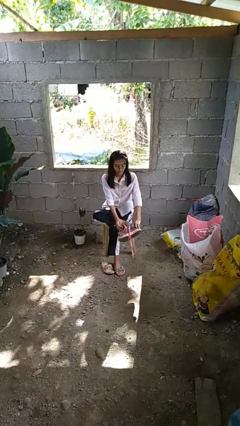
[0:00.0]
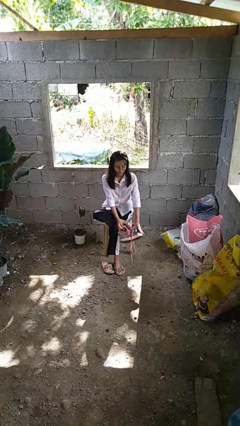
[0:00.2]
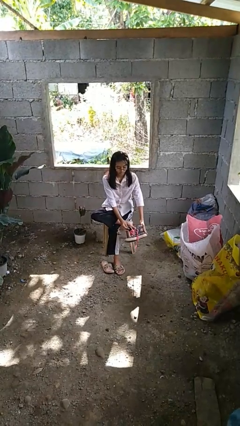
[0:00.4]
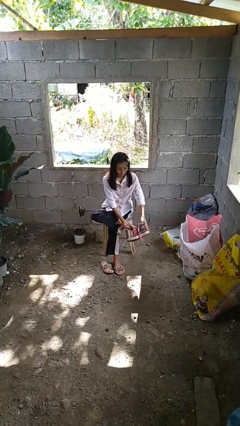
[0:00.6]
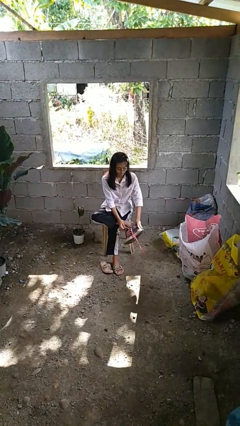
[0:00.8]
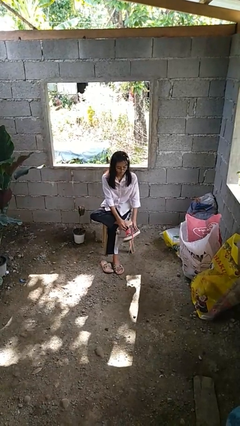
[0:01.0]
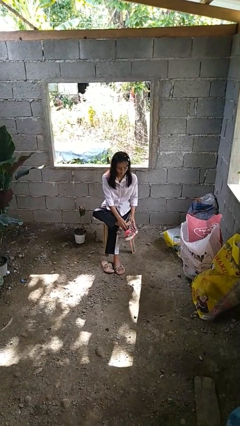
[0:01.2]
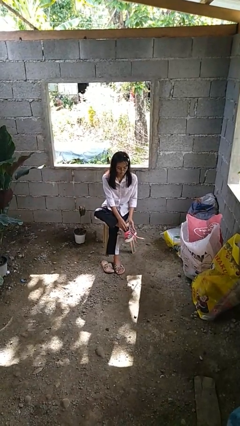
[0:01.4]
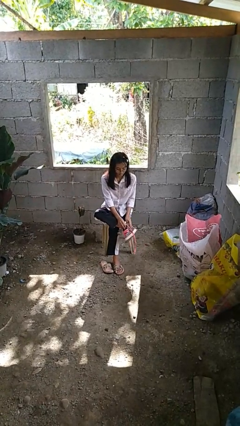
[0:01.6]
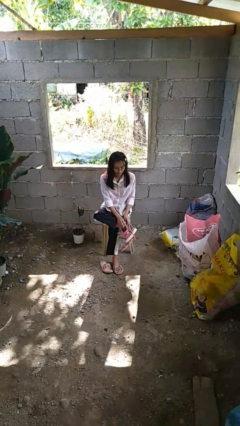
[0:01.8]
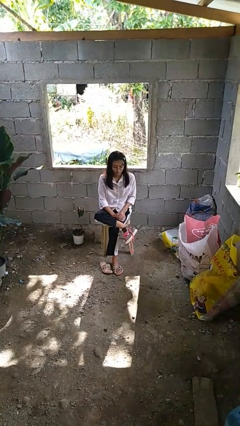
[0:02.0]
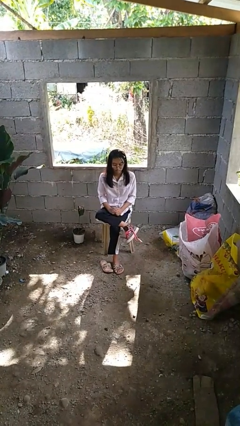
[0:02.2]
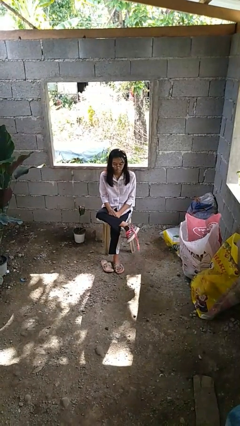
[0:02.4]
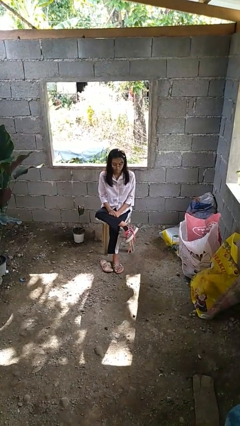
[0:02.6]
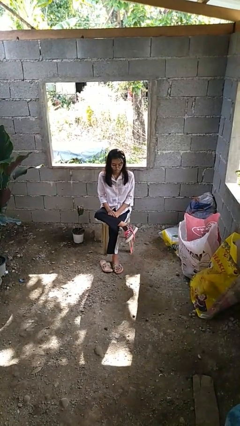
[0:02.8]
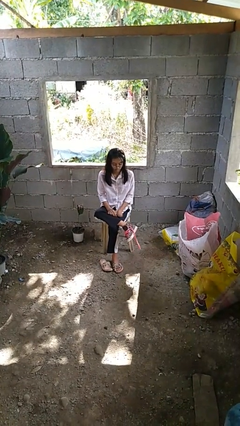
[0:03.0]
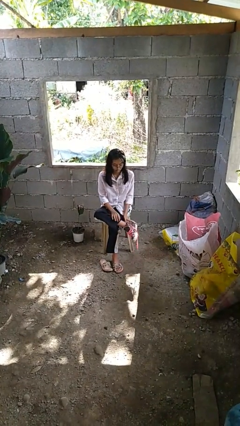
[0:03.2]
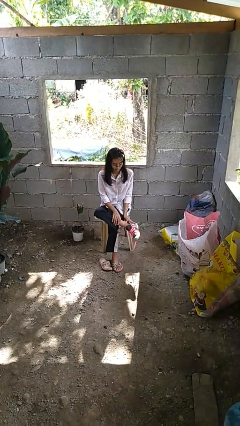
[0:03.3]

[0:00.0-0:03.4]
person puts on shoes

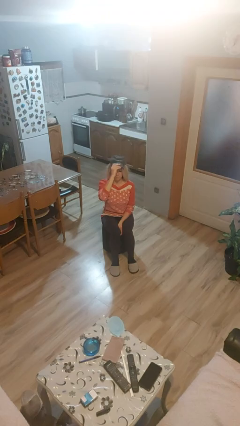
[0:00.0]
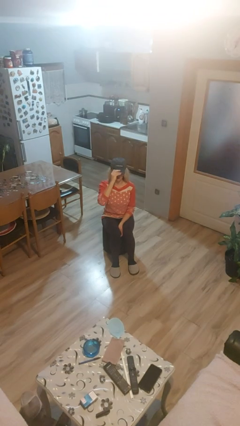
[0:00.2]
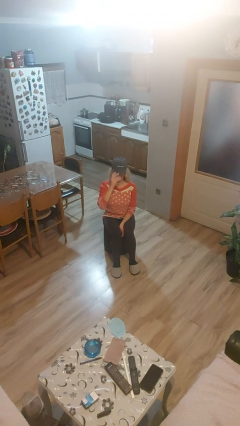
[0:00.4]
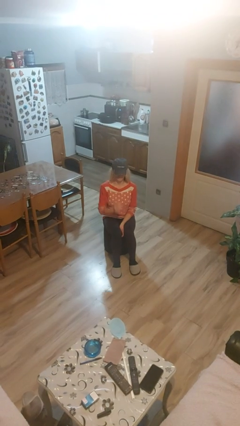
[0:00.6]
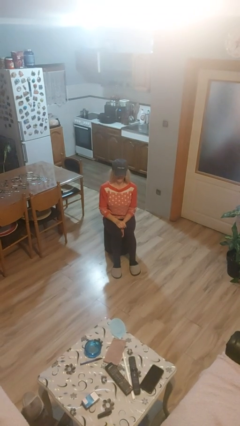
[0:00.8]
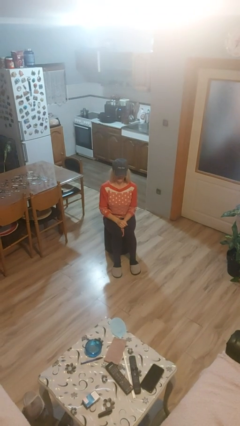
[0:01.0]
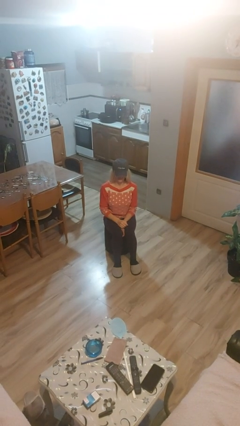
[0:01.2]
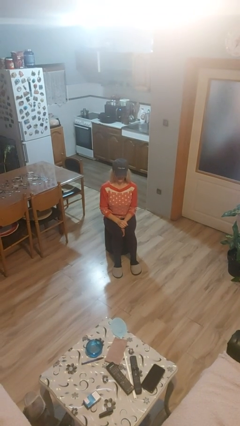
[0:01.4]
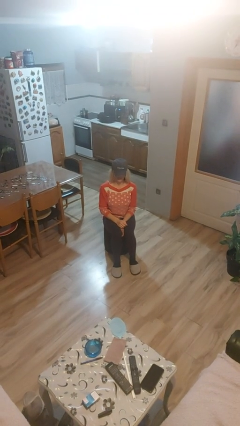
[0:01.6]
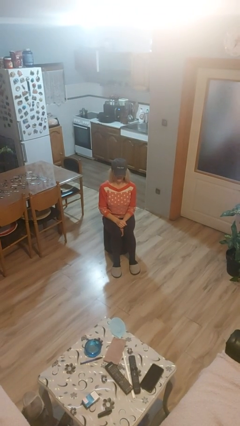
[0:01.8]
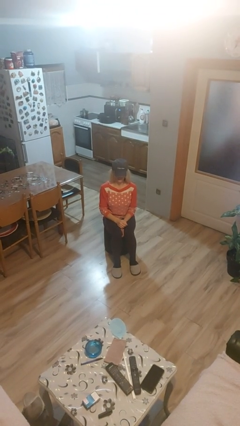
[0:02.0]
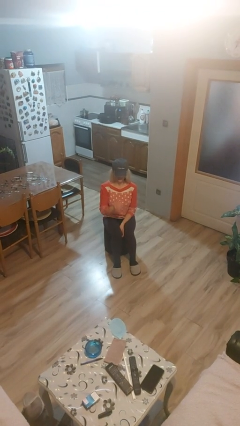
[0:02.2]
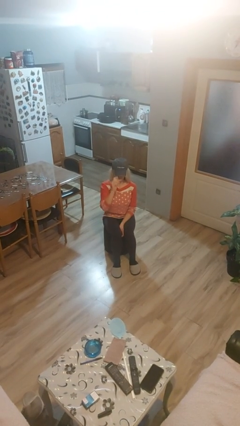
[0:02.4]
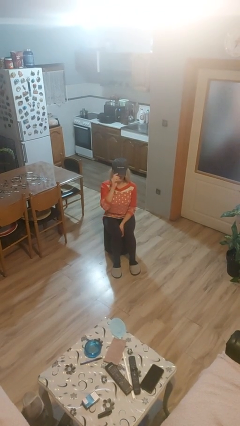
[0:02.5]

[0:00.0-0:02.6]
person puts on hat

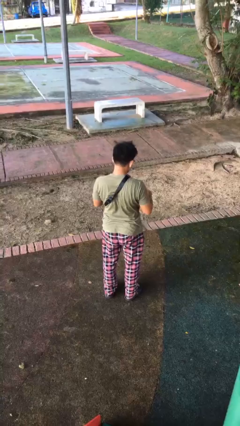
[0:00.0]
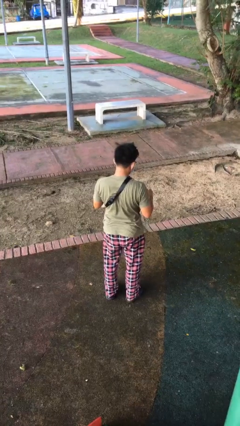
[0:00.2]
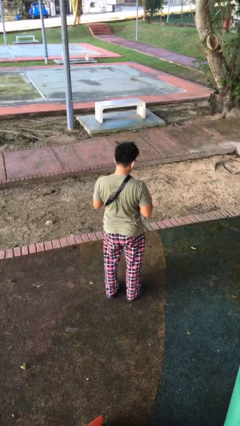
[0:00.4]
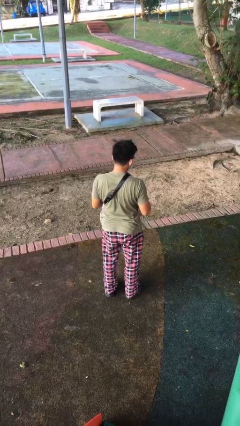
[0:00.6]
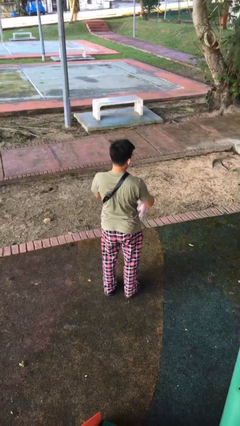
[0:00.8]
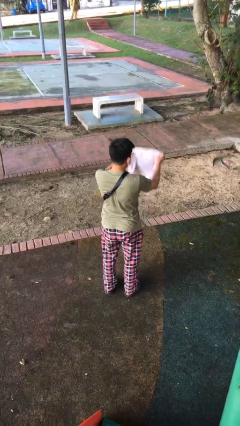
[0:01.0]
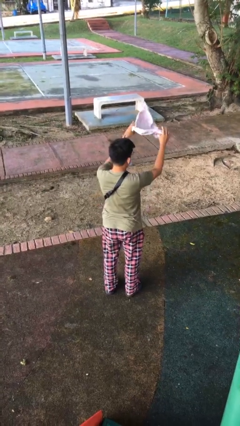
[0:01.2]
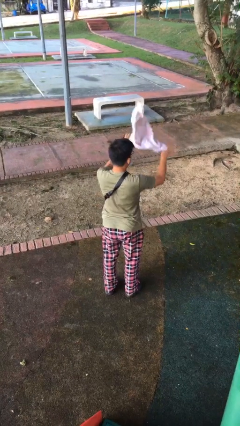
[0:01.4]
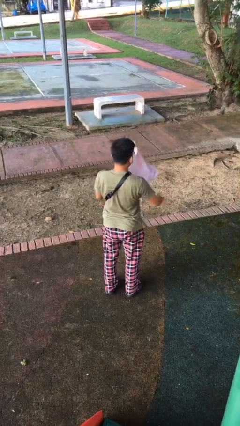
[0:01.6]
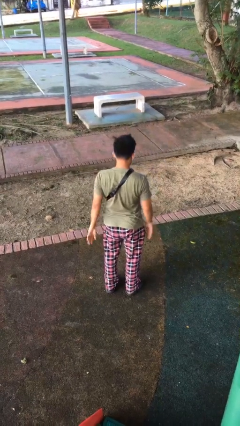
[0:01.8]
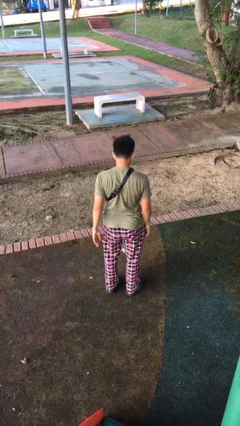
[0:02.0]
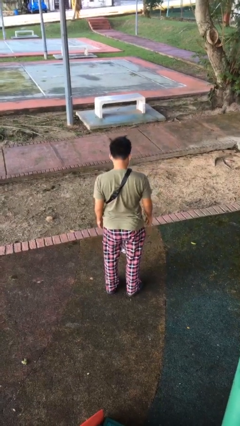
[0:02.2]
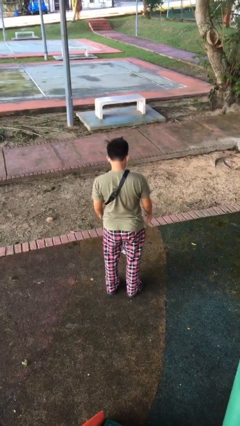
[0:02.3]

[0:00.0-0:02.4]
person throws object into air

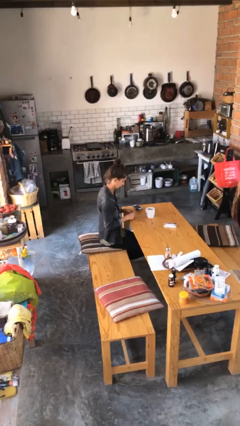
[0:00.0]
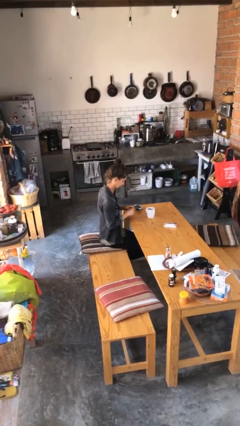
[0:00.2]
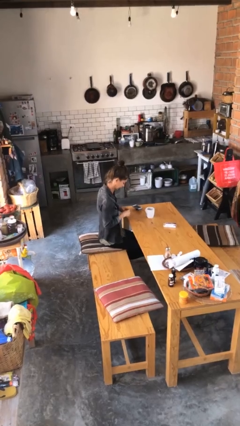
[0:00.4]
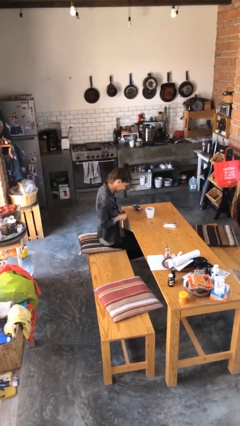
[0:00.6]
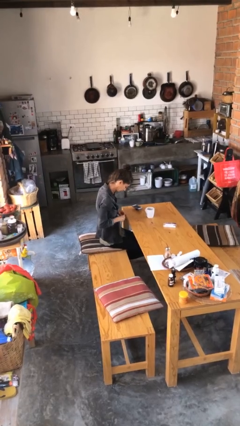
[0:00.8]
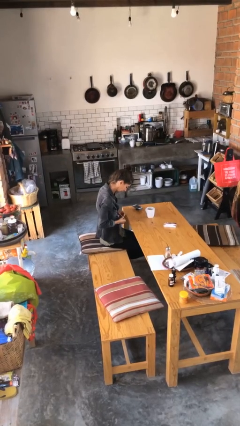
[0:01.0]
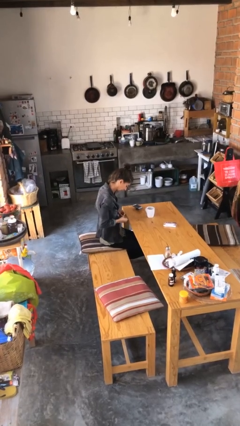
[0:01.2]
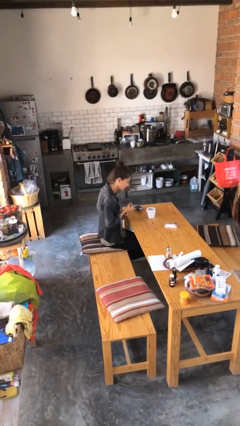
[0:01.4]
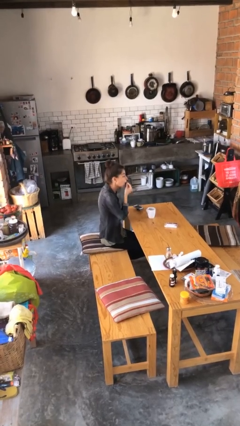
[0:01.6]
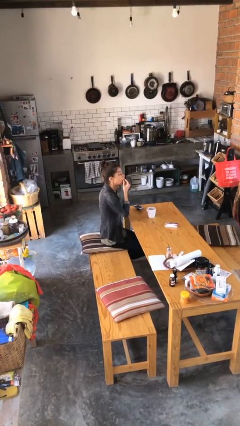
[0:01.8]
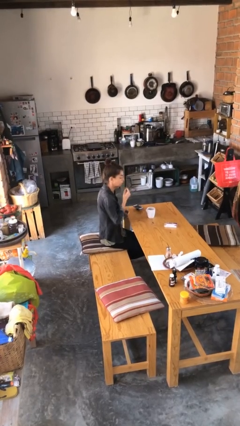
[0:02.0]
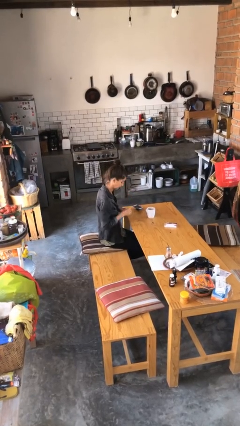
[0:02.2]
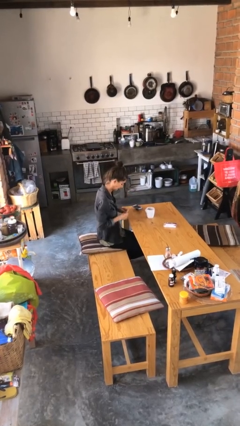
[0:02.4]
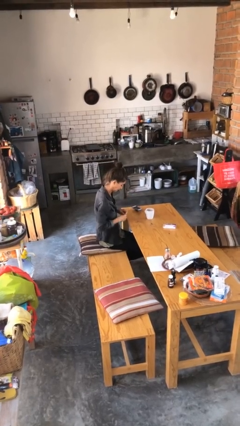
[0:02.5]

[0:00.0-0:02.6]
person takes medicine pills

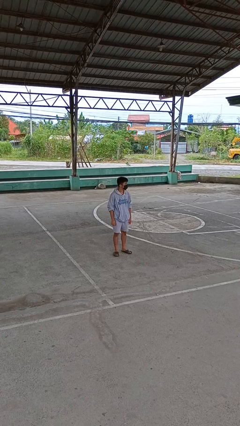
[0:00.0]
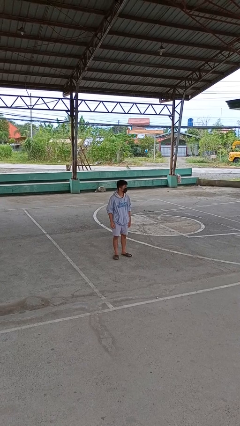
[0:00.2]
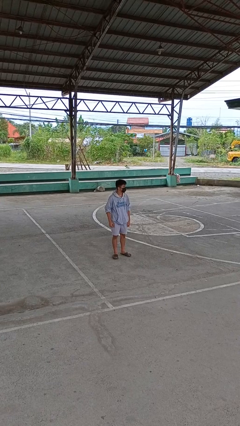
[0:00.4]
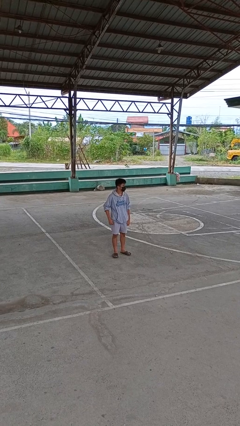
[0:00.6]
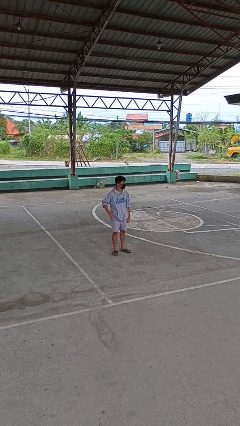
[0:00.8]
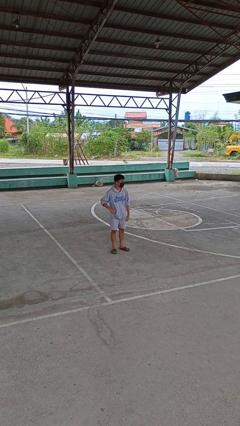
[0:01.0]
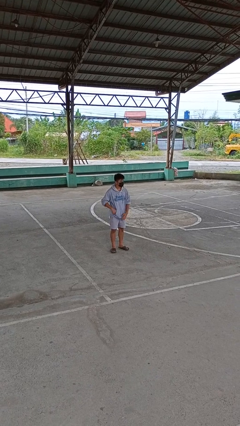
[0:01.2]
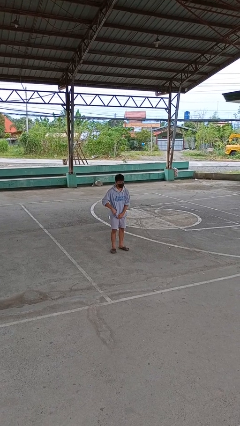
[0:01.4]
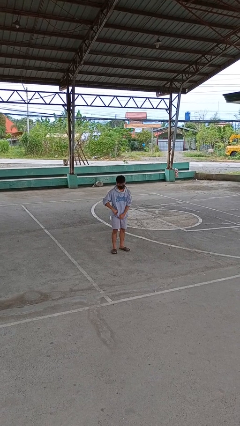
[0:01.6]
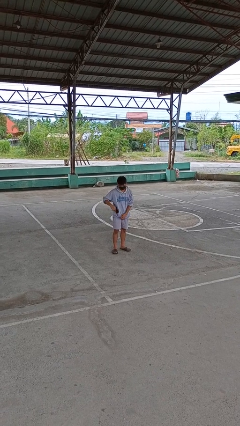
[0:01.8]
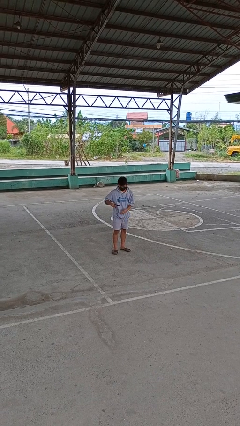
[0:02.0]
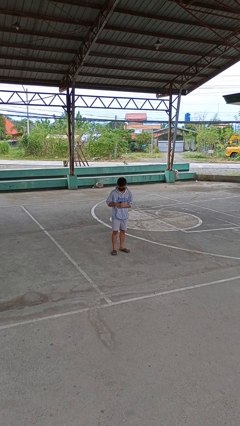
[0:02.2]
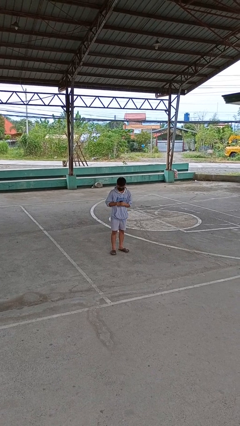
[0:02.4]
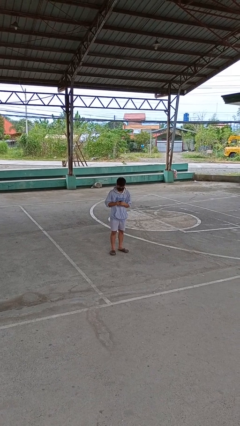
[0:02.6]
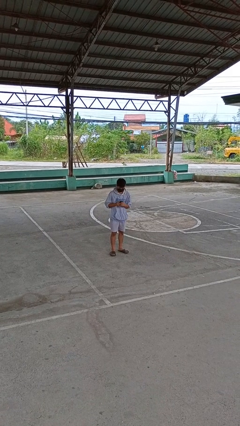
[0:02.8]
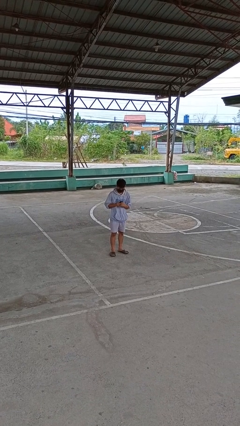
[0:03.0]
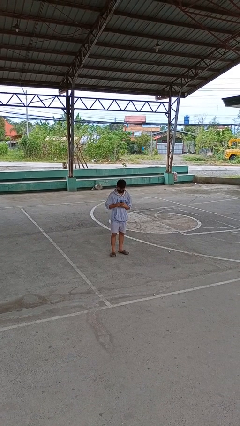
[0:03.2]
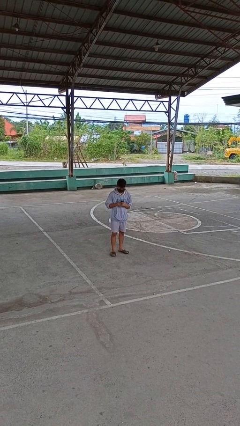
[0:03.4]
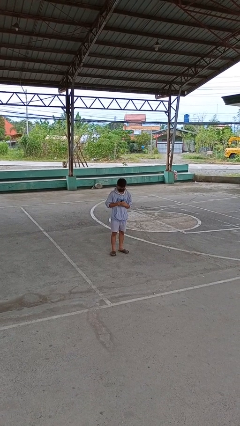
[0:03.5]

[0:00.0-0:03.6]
person takes phone from pocket

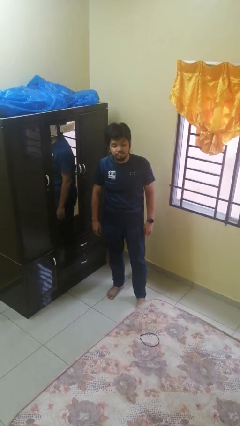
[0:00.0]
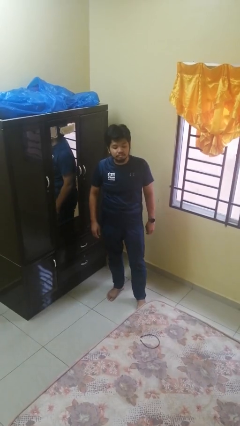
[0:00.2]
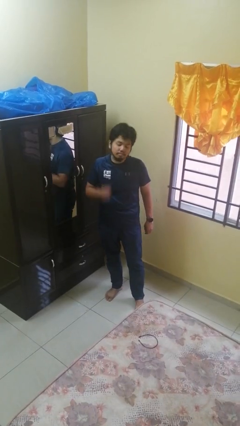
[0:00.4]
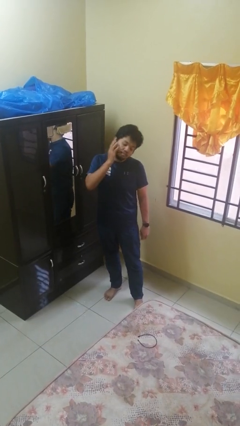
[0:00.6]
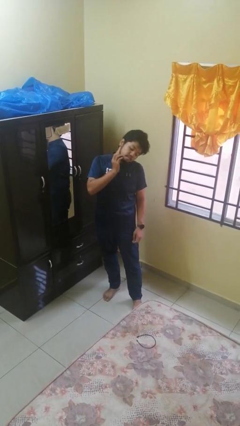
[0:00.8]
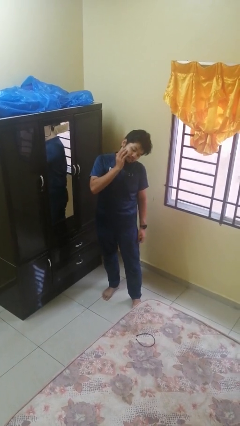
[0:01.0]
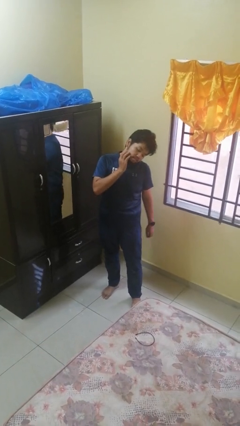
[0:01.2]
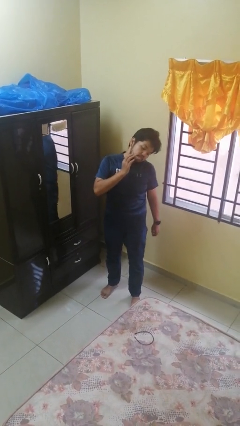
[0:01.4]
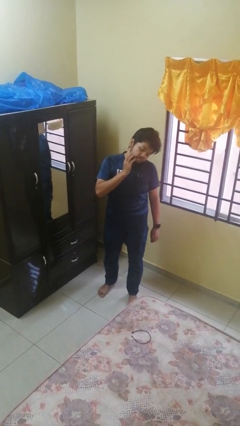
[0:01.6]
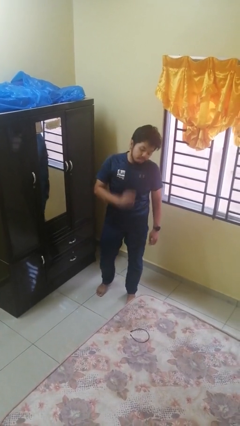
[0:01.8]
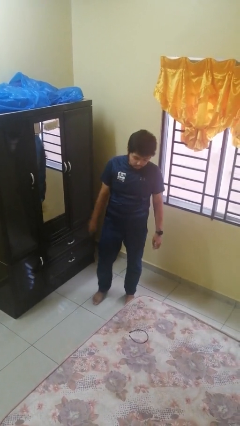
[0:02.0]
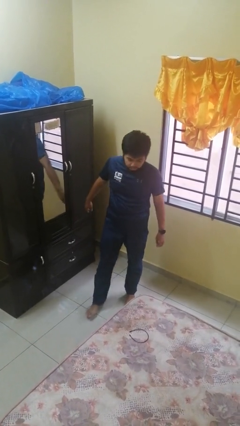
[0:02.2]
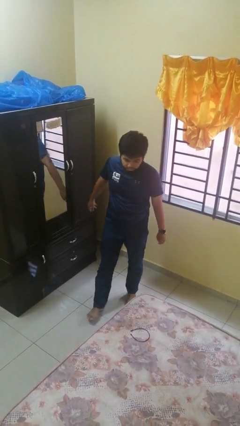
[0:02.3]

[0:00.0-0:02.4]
person scratches face

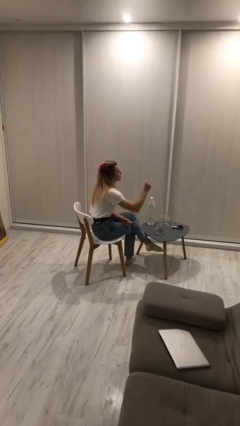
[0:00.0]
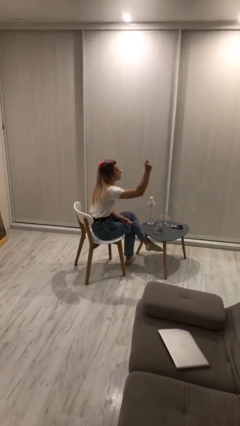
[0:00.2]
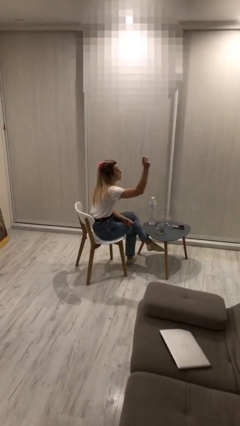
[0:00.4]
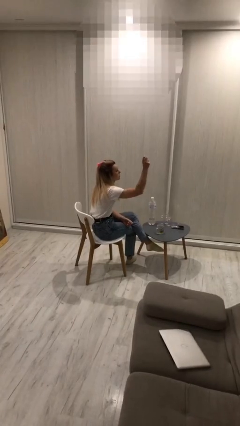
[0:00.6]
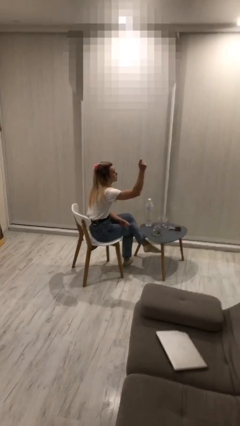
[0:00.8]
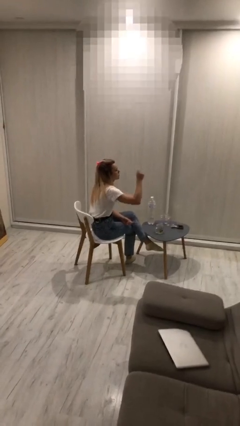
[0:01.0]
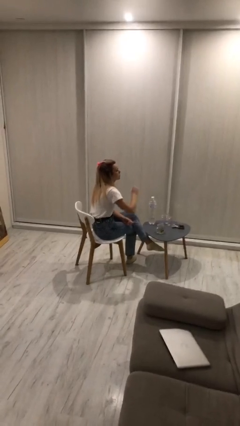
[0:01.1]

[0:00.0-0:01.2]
person snaps fingers
